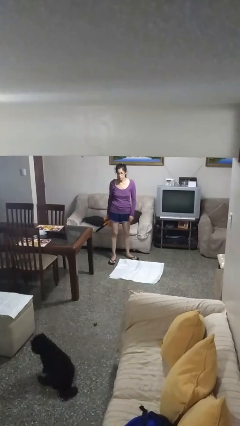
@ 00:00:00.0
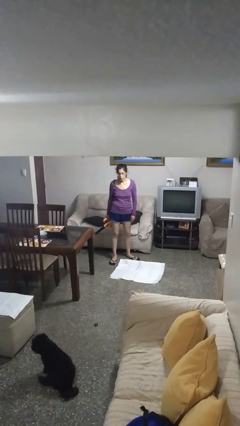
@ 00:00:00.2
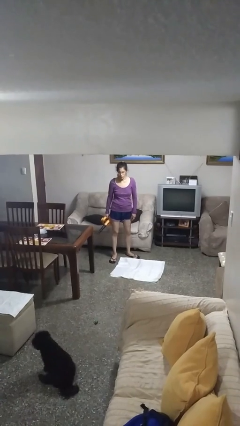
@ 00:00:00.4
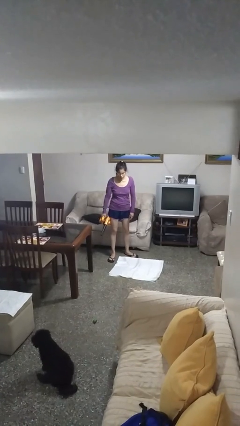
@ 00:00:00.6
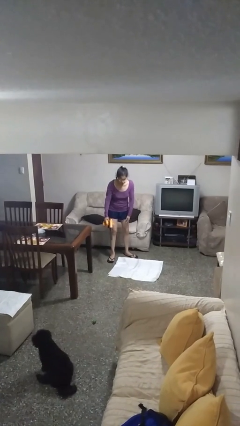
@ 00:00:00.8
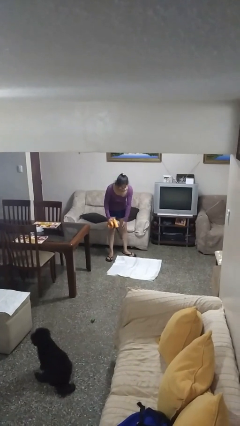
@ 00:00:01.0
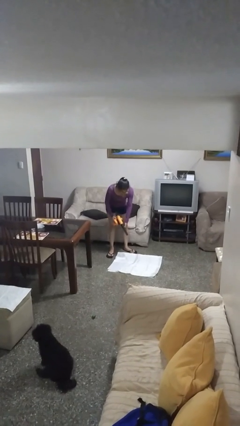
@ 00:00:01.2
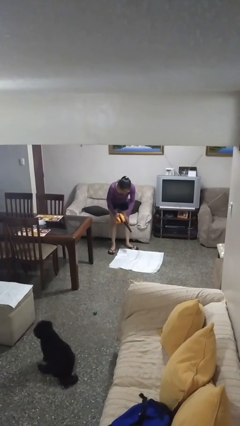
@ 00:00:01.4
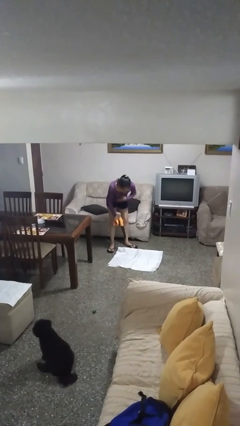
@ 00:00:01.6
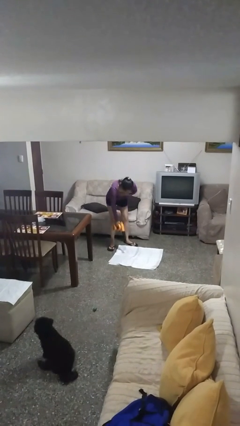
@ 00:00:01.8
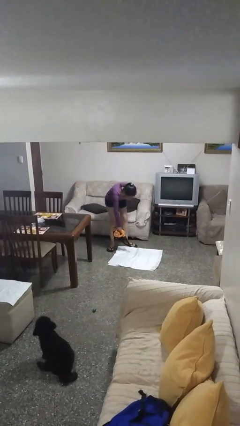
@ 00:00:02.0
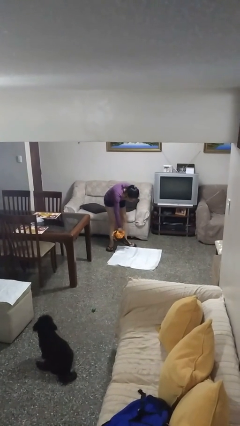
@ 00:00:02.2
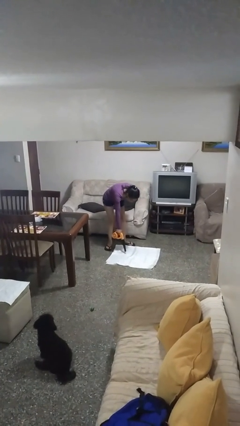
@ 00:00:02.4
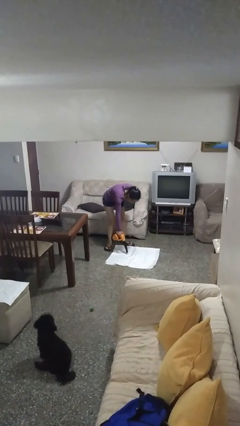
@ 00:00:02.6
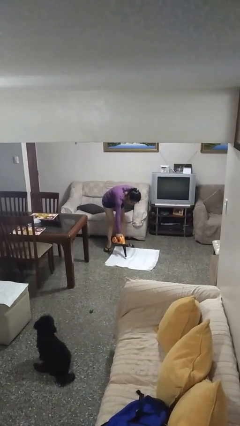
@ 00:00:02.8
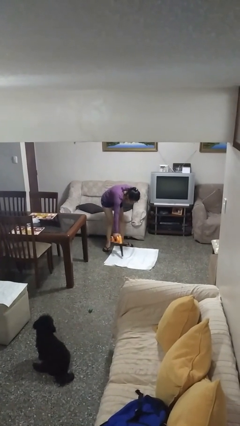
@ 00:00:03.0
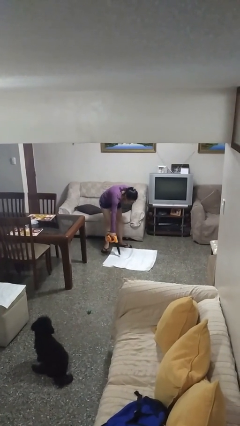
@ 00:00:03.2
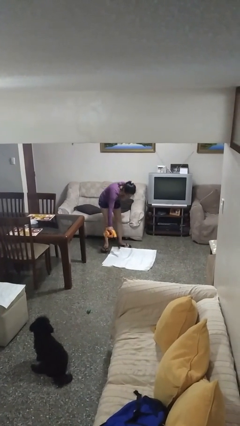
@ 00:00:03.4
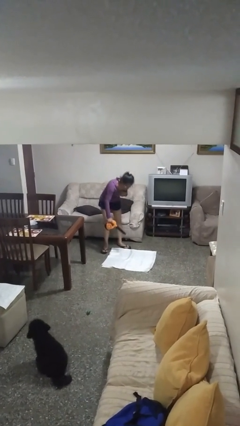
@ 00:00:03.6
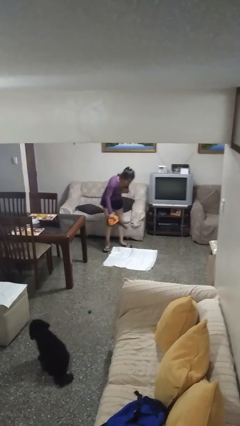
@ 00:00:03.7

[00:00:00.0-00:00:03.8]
person vacuums carpet

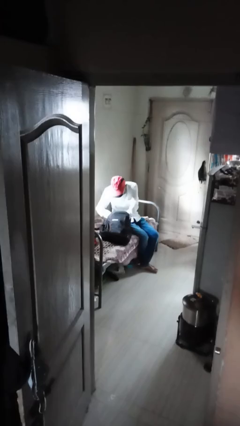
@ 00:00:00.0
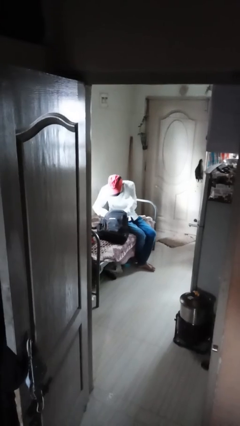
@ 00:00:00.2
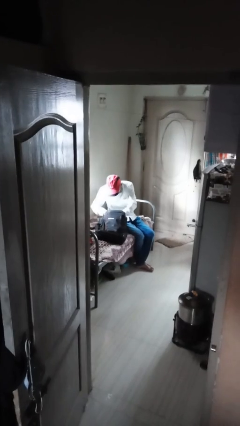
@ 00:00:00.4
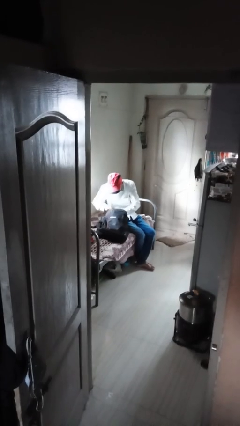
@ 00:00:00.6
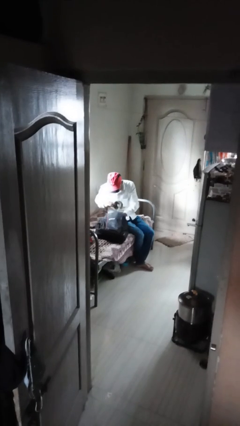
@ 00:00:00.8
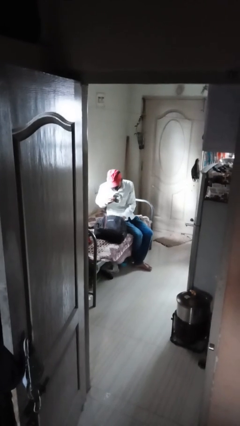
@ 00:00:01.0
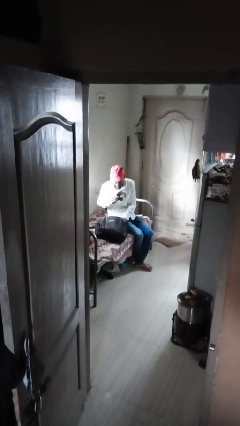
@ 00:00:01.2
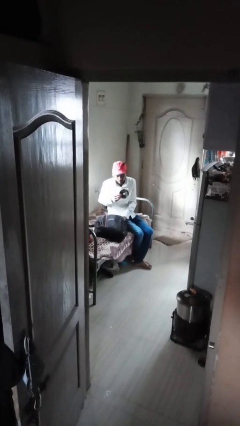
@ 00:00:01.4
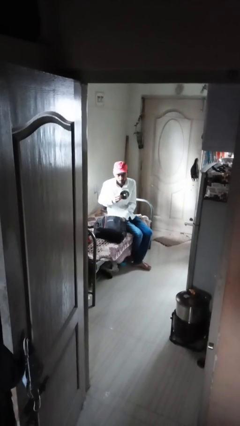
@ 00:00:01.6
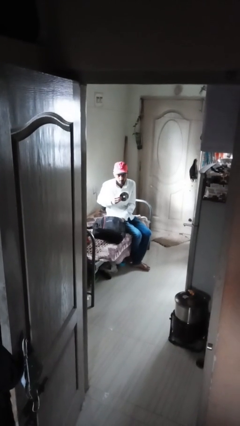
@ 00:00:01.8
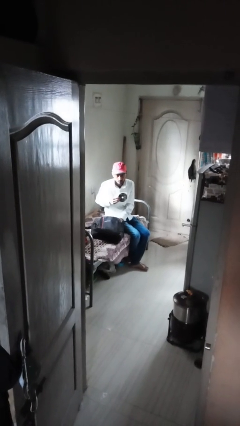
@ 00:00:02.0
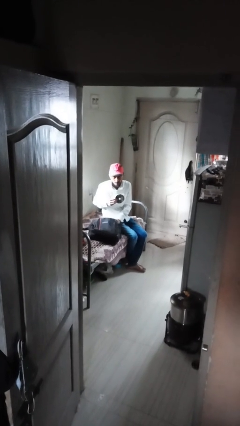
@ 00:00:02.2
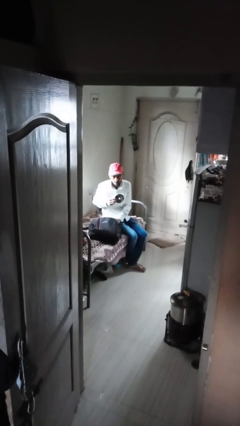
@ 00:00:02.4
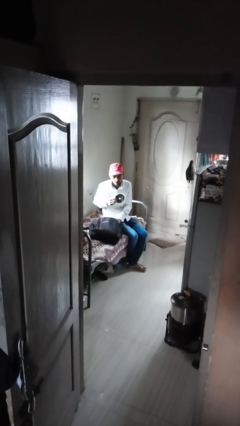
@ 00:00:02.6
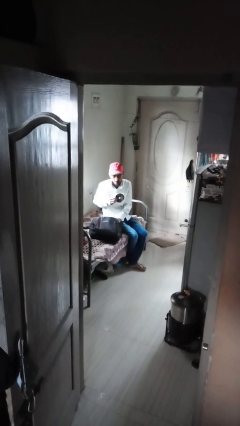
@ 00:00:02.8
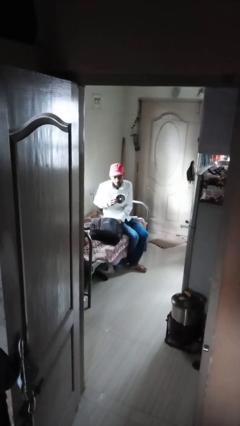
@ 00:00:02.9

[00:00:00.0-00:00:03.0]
person takes object from backpack

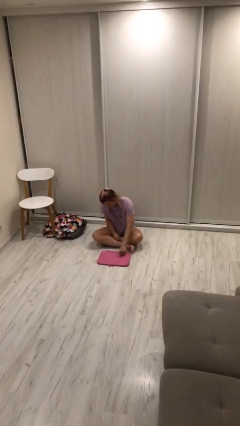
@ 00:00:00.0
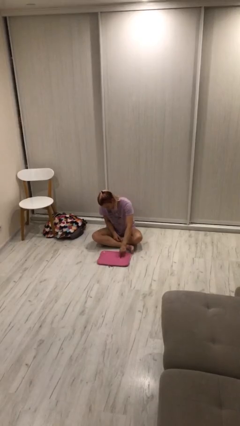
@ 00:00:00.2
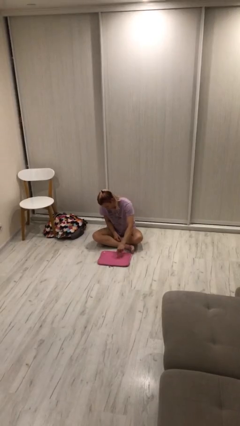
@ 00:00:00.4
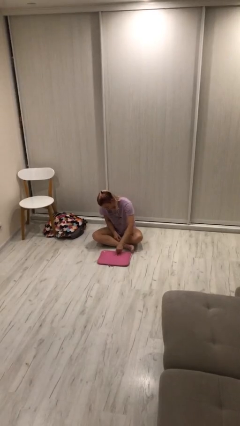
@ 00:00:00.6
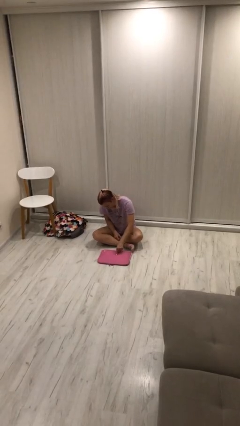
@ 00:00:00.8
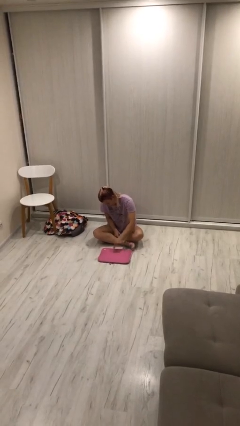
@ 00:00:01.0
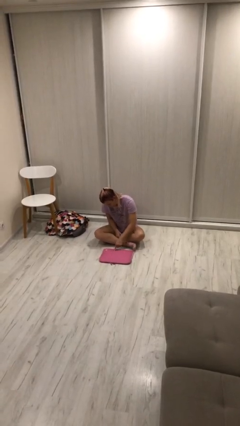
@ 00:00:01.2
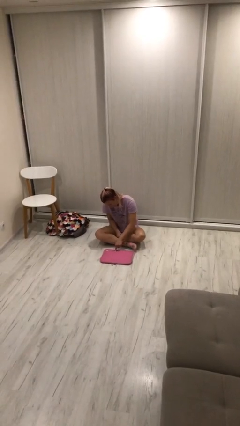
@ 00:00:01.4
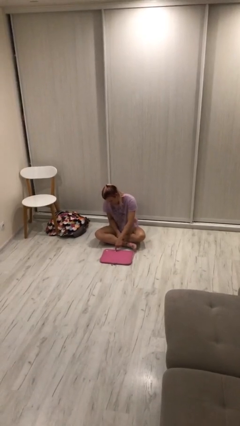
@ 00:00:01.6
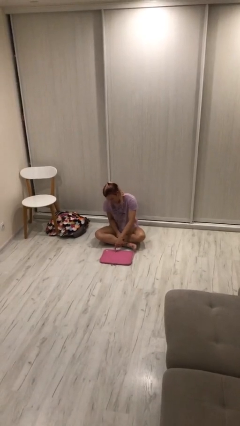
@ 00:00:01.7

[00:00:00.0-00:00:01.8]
person taps object with finger

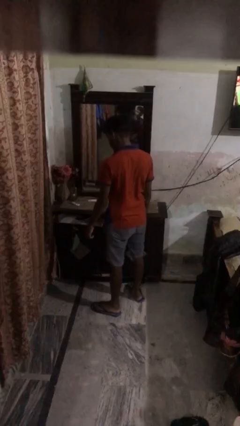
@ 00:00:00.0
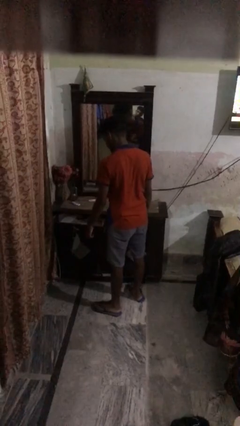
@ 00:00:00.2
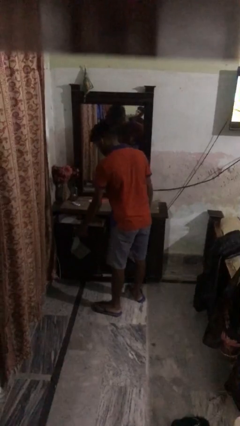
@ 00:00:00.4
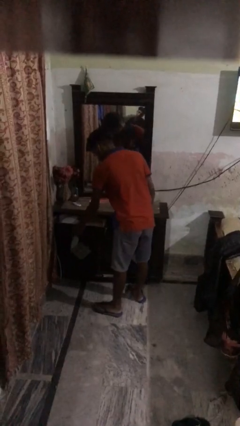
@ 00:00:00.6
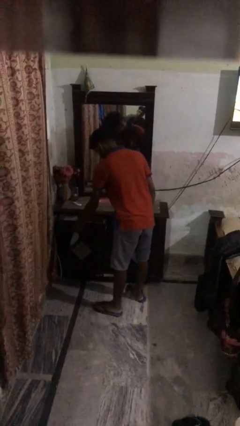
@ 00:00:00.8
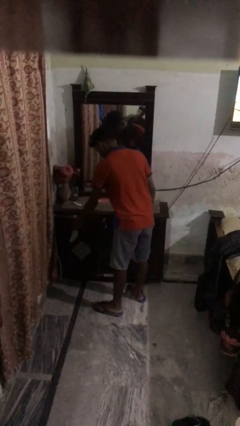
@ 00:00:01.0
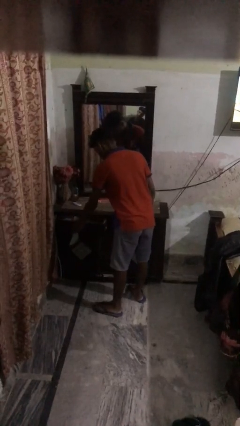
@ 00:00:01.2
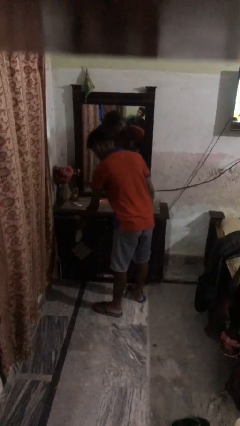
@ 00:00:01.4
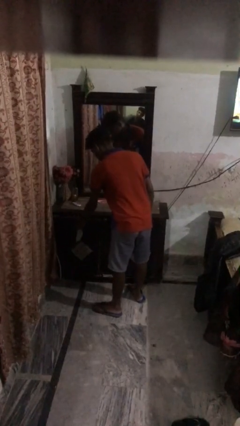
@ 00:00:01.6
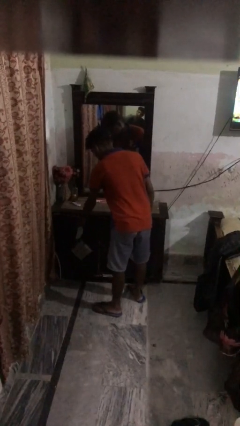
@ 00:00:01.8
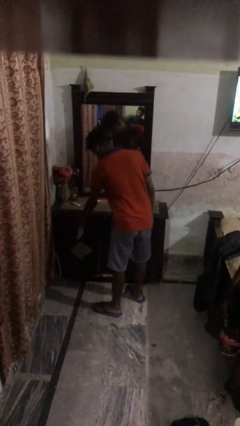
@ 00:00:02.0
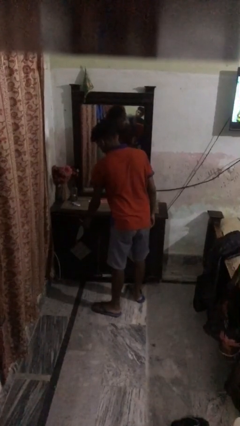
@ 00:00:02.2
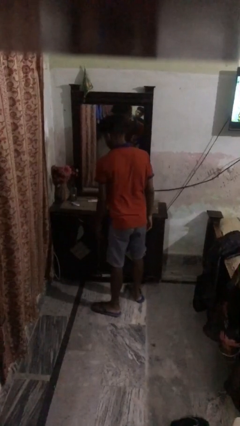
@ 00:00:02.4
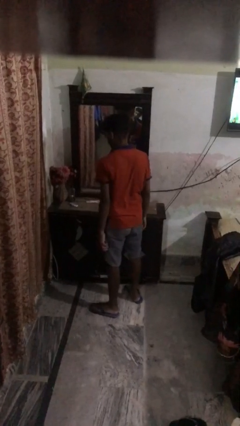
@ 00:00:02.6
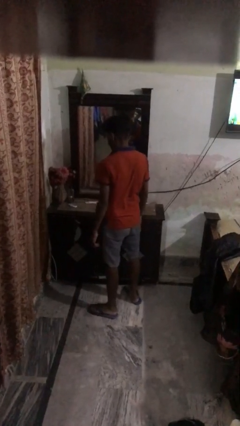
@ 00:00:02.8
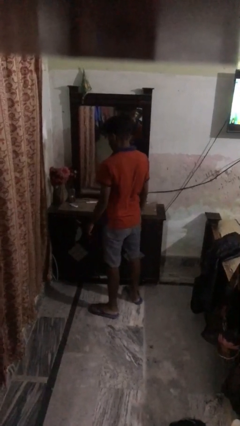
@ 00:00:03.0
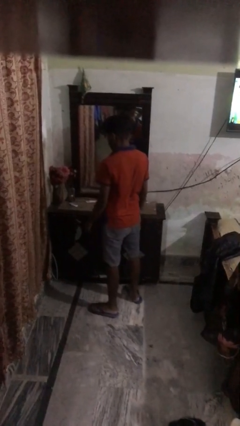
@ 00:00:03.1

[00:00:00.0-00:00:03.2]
person closes dresser drawer

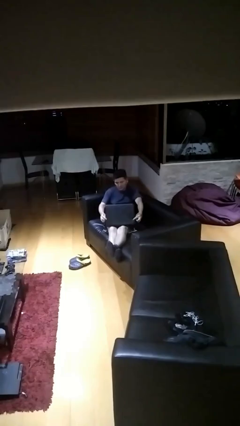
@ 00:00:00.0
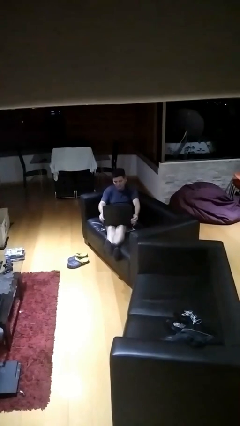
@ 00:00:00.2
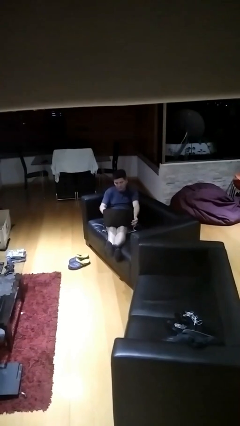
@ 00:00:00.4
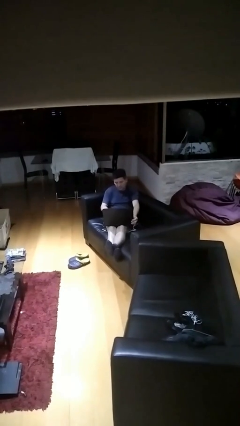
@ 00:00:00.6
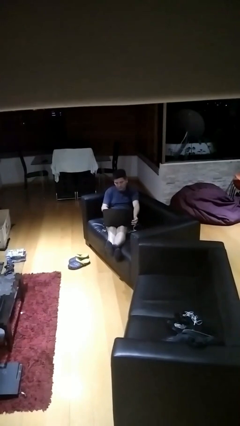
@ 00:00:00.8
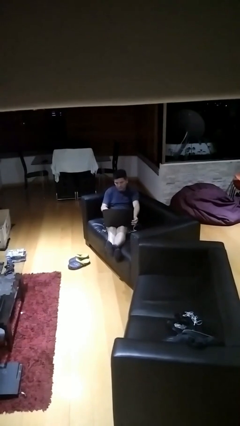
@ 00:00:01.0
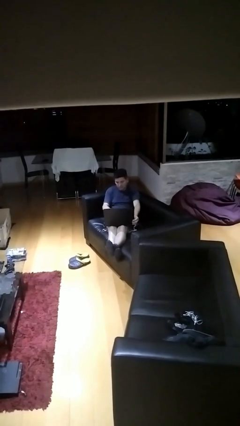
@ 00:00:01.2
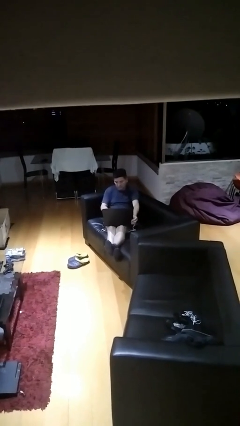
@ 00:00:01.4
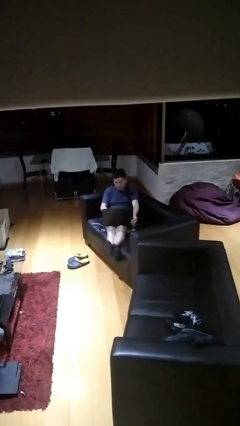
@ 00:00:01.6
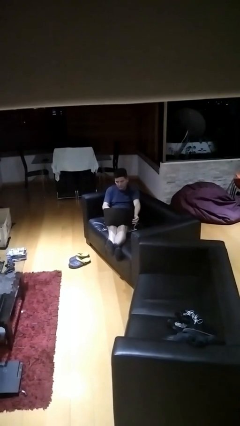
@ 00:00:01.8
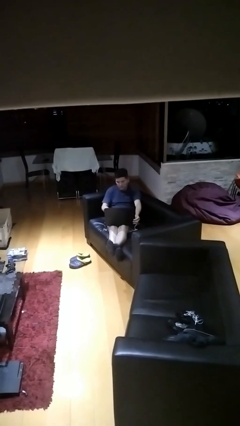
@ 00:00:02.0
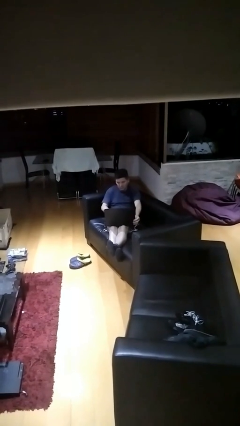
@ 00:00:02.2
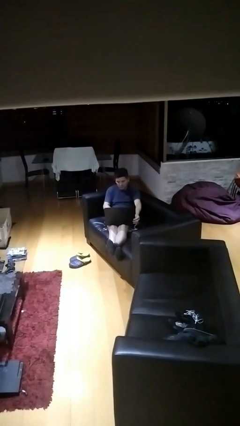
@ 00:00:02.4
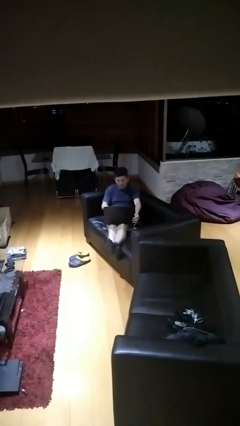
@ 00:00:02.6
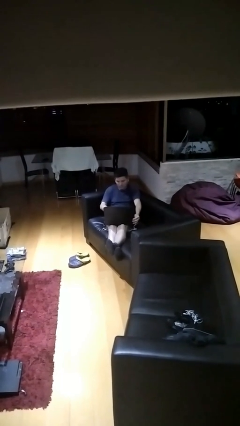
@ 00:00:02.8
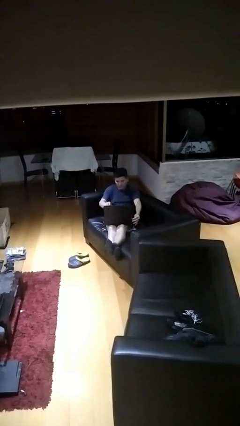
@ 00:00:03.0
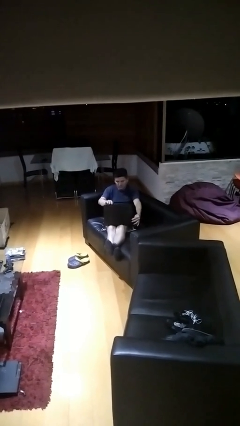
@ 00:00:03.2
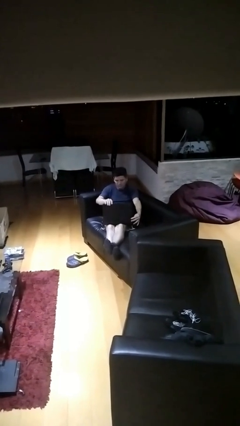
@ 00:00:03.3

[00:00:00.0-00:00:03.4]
person interacts with laptop

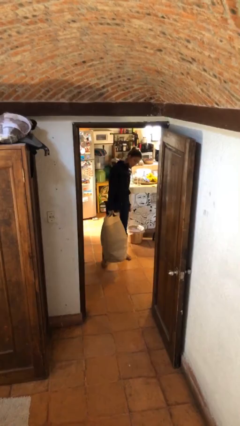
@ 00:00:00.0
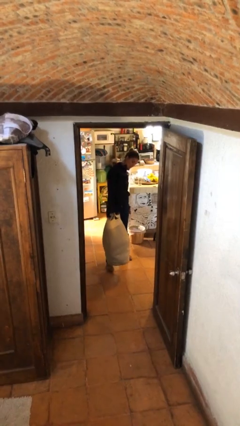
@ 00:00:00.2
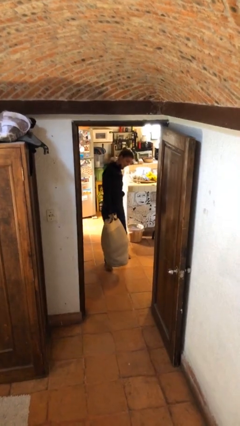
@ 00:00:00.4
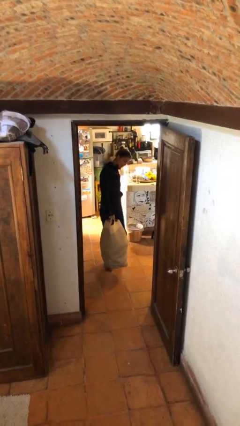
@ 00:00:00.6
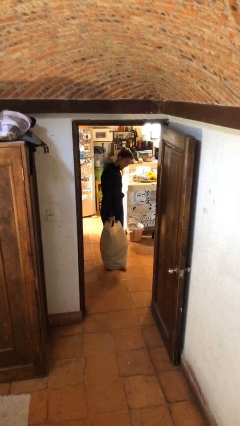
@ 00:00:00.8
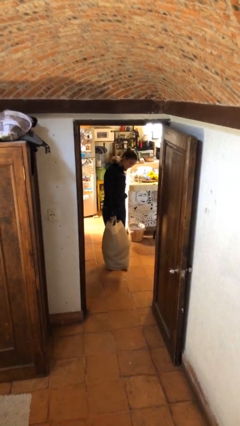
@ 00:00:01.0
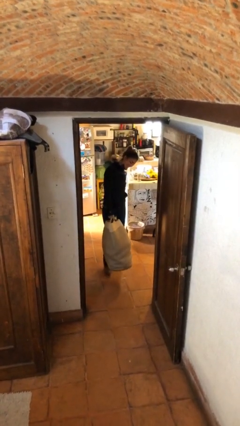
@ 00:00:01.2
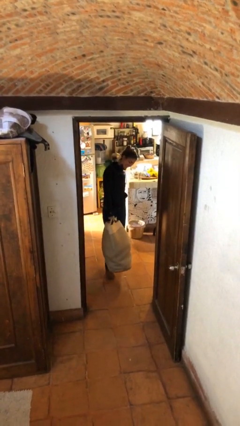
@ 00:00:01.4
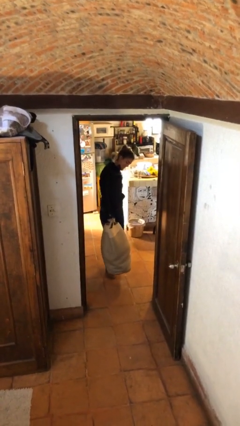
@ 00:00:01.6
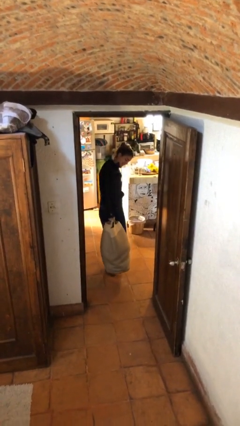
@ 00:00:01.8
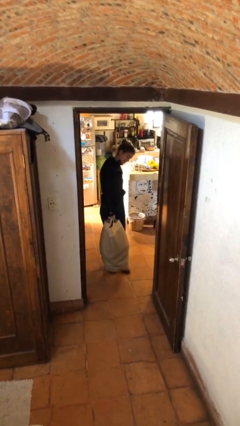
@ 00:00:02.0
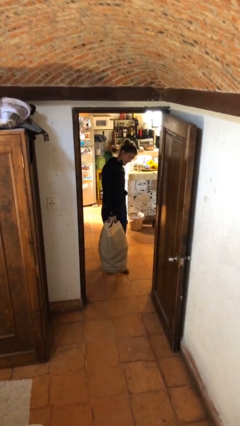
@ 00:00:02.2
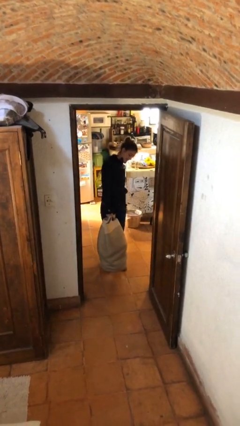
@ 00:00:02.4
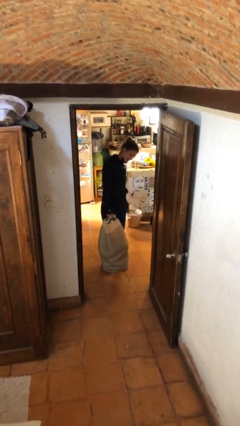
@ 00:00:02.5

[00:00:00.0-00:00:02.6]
person carries heavy object
